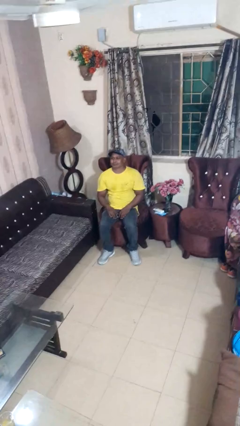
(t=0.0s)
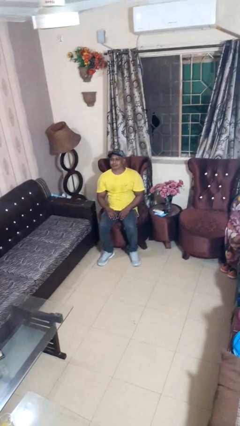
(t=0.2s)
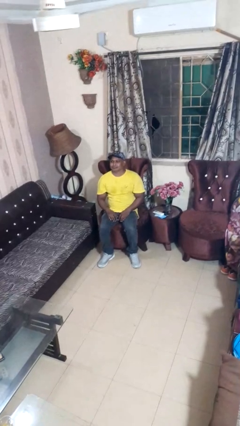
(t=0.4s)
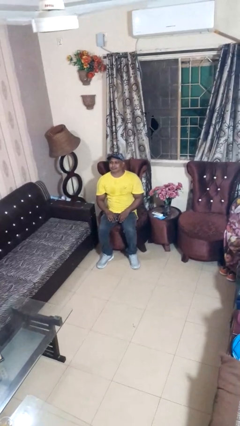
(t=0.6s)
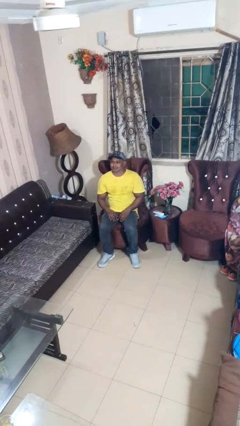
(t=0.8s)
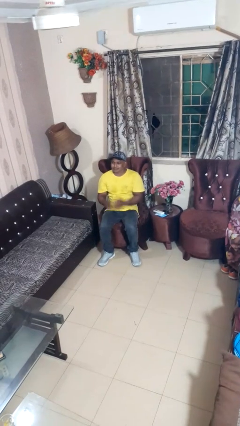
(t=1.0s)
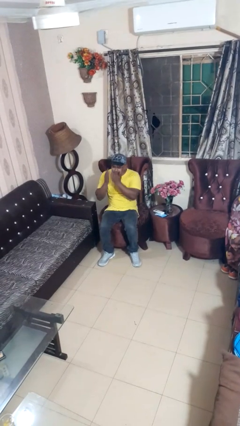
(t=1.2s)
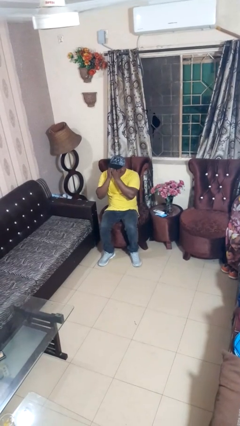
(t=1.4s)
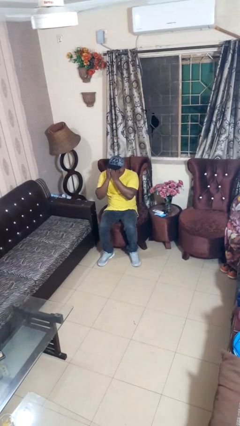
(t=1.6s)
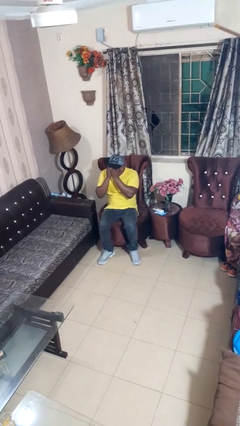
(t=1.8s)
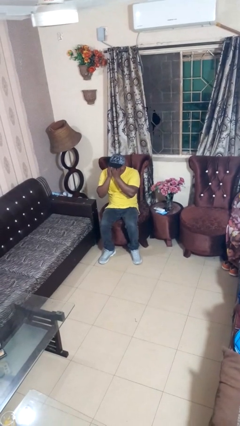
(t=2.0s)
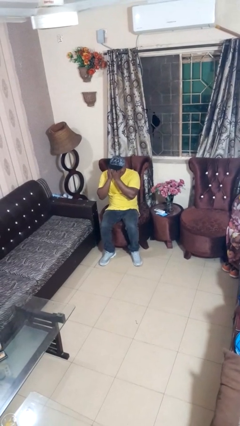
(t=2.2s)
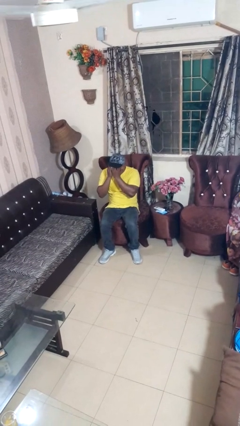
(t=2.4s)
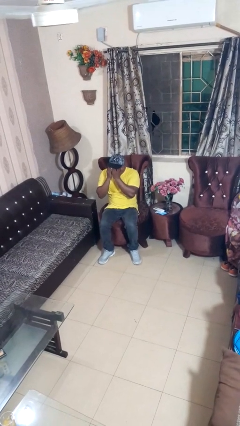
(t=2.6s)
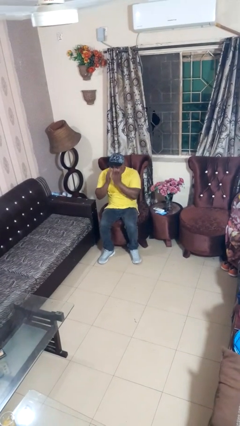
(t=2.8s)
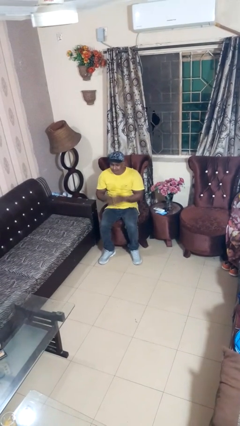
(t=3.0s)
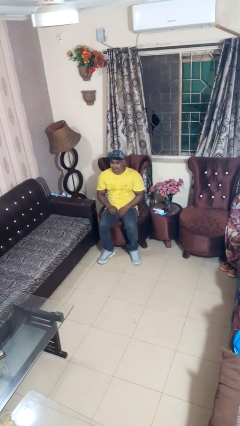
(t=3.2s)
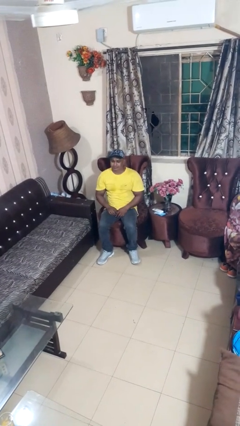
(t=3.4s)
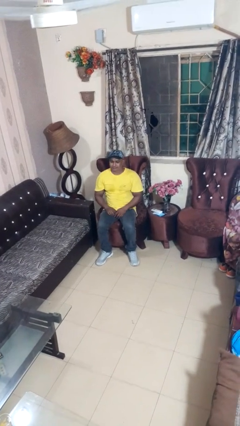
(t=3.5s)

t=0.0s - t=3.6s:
person covers face with hands

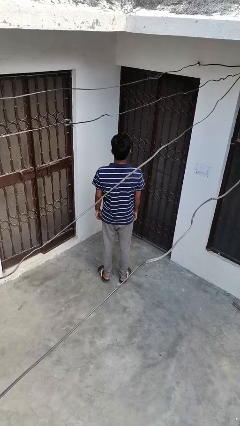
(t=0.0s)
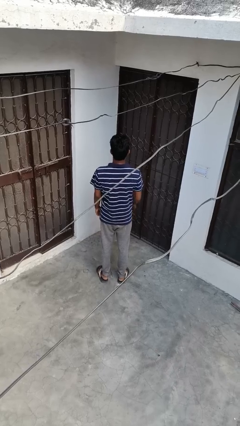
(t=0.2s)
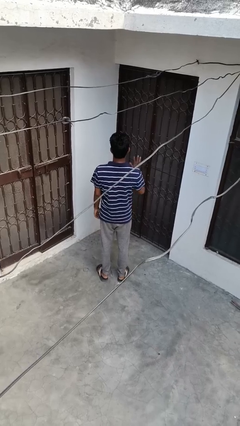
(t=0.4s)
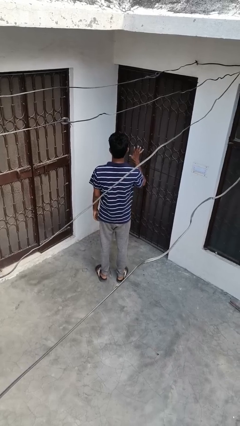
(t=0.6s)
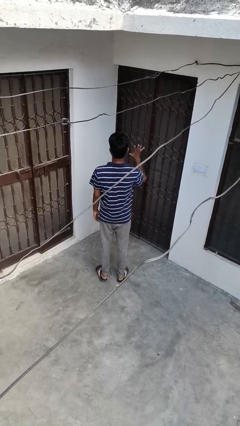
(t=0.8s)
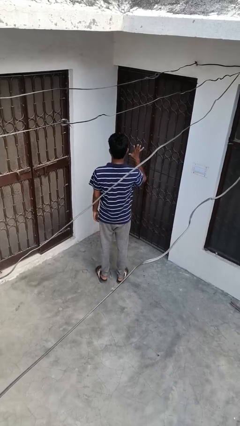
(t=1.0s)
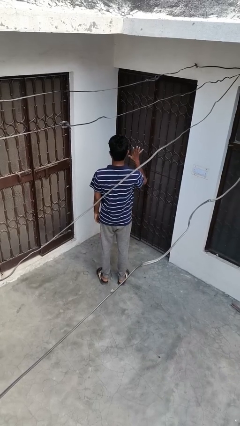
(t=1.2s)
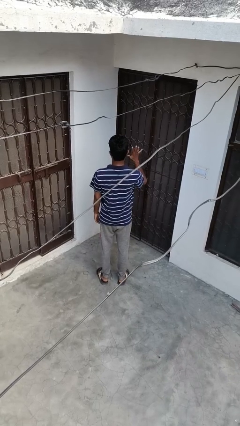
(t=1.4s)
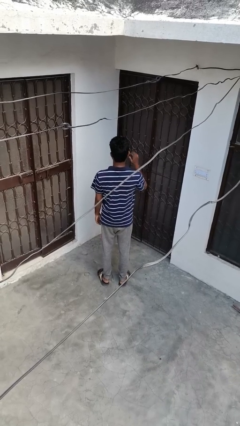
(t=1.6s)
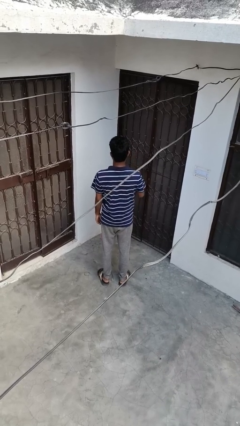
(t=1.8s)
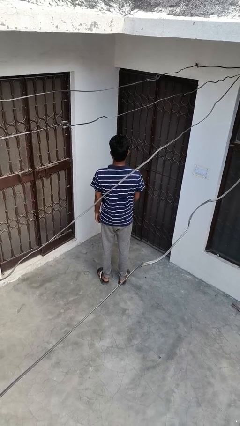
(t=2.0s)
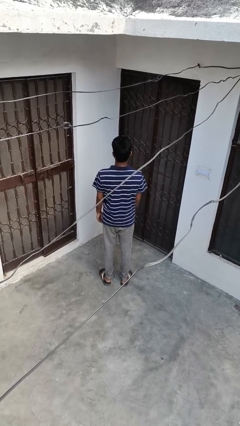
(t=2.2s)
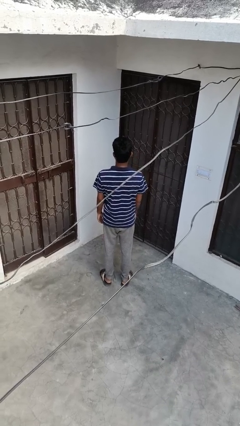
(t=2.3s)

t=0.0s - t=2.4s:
person gestures number five

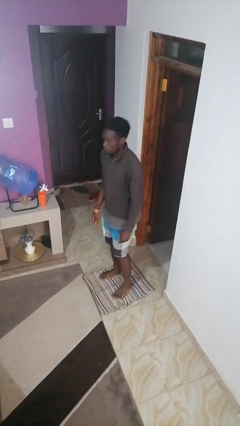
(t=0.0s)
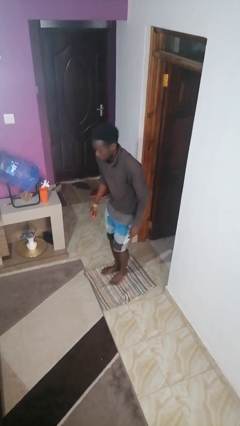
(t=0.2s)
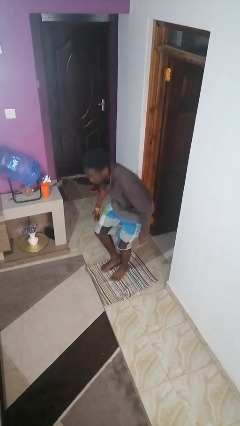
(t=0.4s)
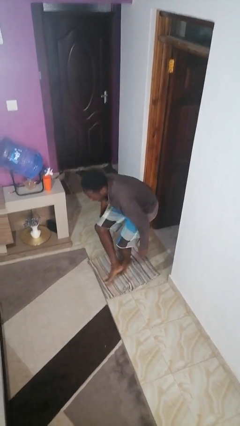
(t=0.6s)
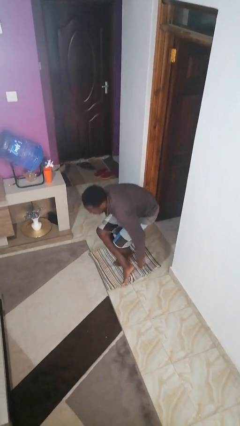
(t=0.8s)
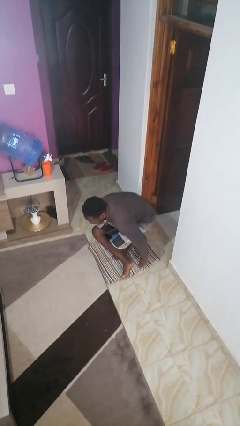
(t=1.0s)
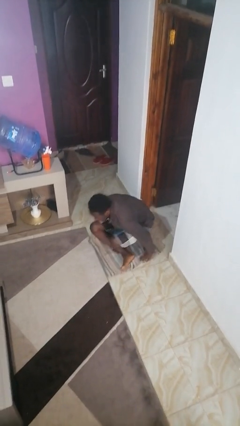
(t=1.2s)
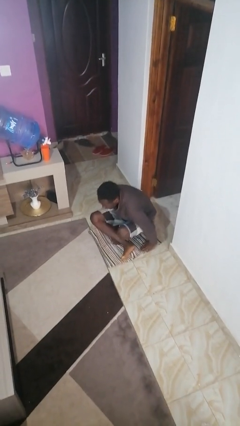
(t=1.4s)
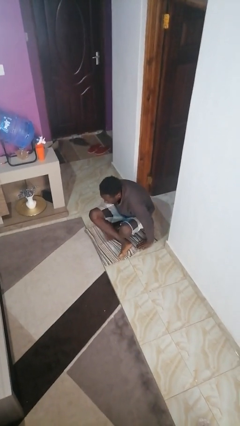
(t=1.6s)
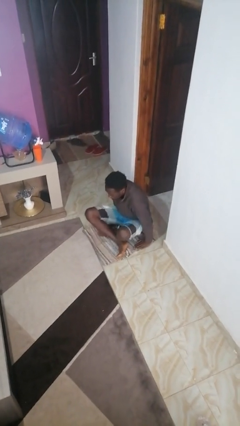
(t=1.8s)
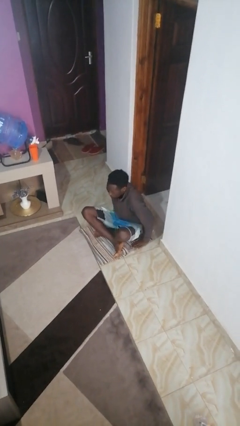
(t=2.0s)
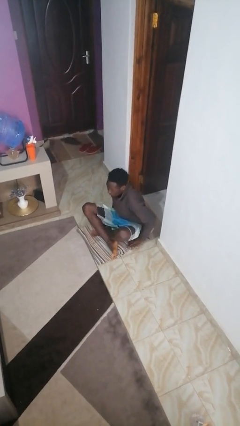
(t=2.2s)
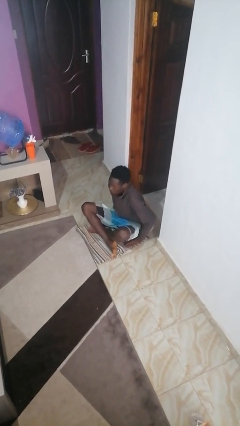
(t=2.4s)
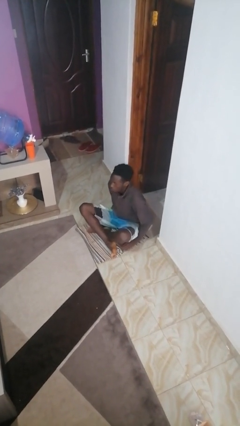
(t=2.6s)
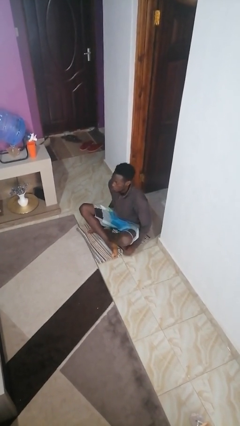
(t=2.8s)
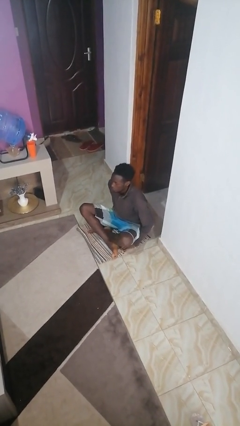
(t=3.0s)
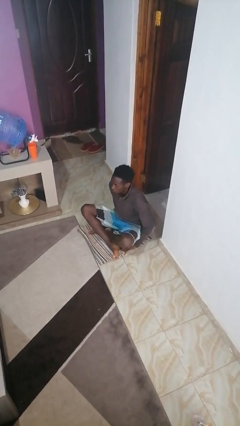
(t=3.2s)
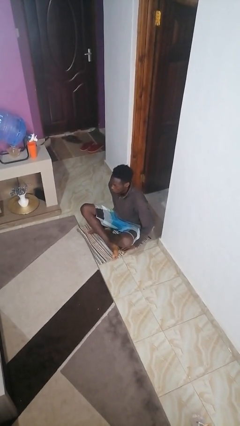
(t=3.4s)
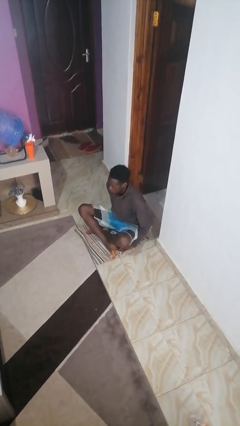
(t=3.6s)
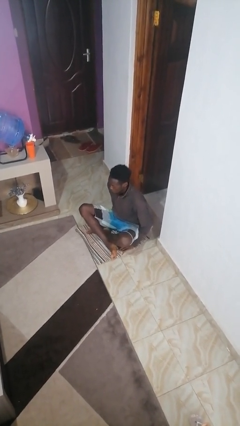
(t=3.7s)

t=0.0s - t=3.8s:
person sits crisscross

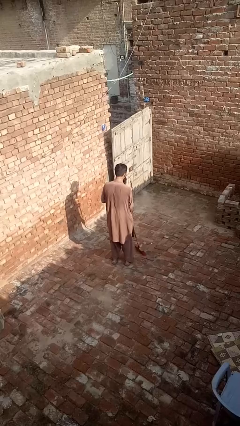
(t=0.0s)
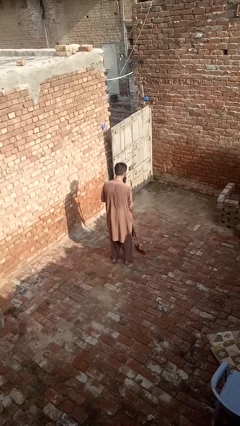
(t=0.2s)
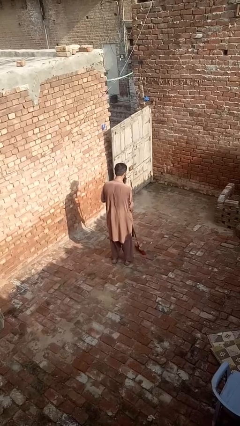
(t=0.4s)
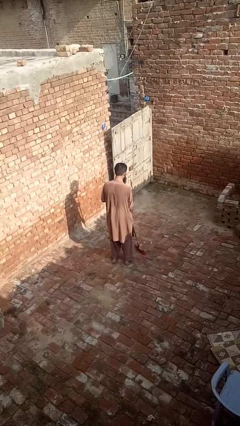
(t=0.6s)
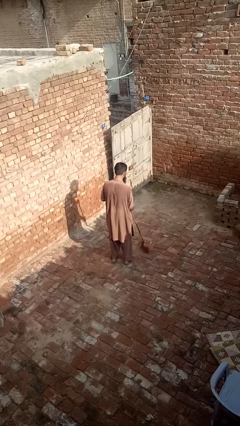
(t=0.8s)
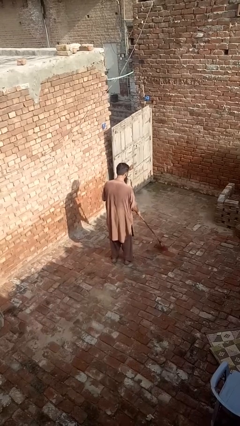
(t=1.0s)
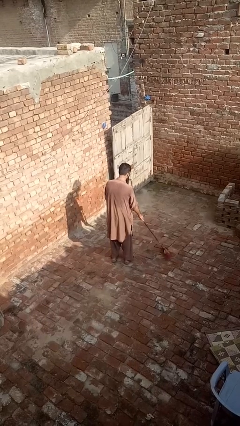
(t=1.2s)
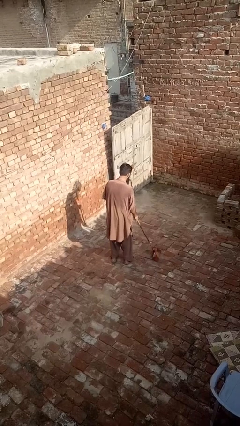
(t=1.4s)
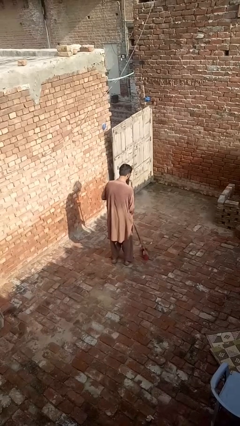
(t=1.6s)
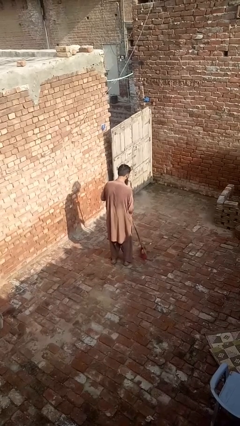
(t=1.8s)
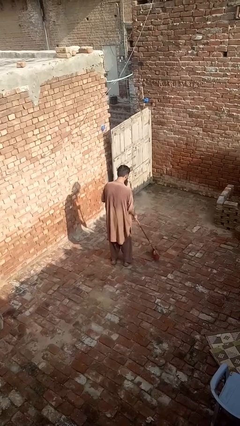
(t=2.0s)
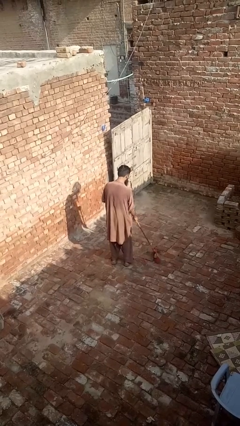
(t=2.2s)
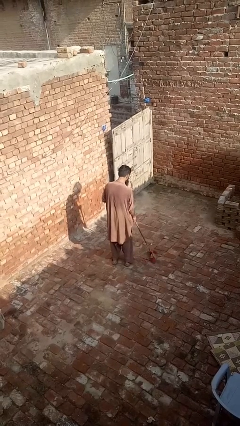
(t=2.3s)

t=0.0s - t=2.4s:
person sweeps floor

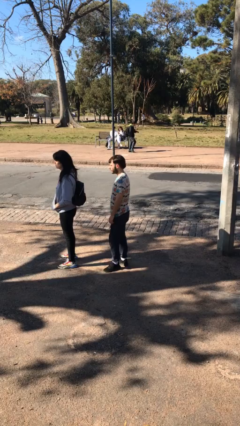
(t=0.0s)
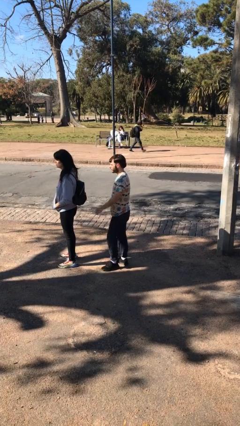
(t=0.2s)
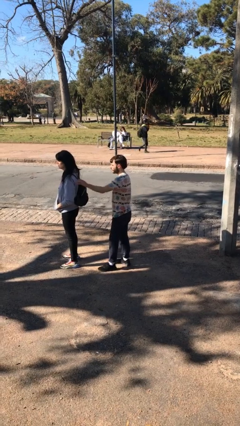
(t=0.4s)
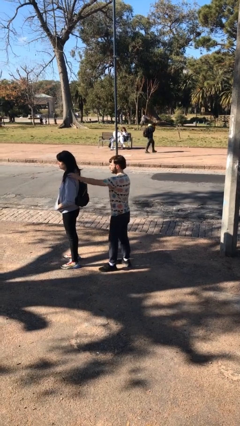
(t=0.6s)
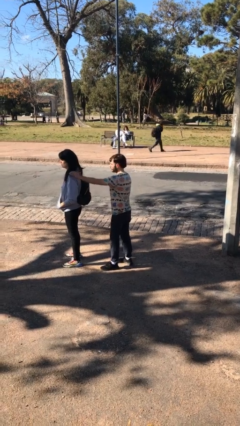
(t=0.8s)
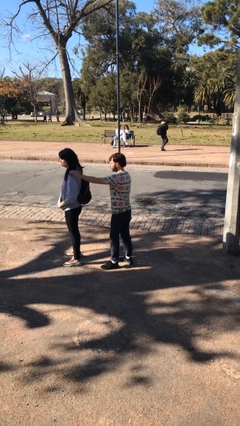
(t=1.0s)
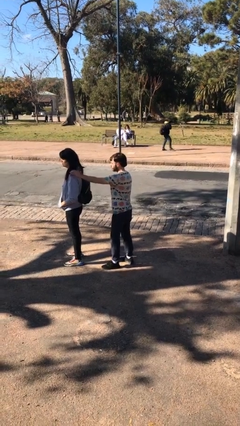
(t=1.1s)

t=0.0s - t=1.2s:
person grabs person by shoulder

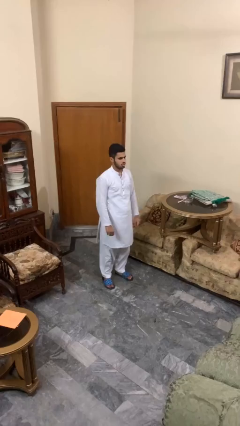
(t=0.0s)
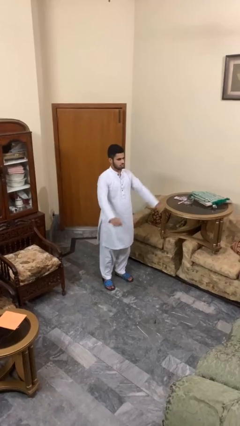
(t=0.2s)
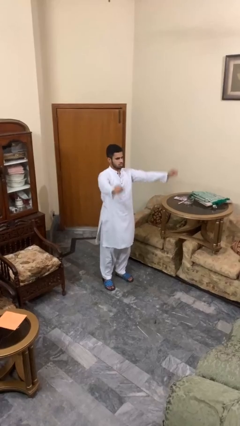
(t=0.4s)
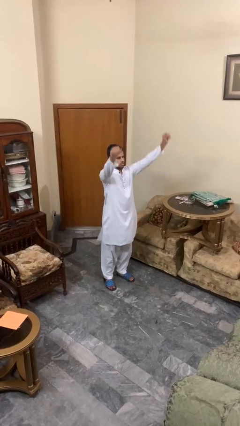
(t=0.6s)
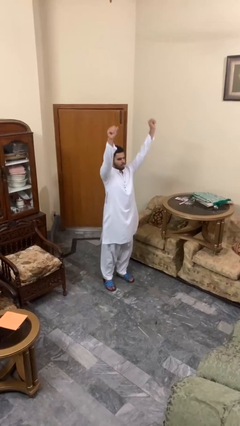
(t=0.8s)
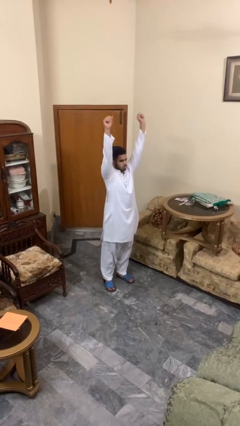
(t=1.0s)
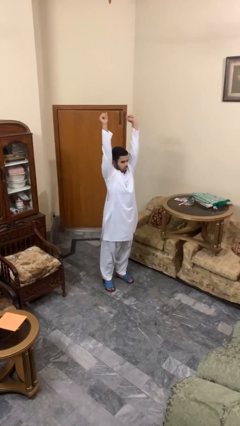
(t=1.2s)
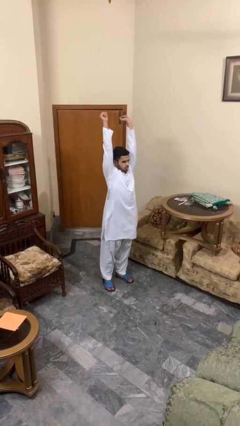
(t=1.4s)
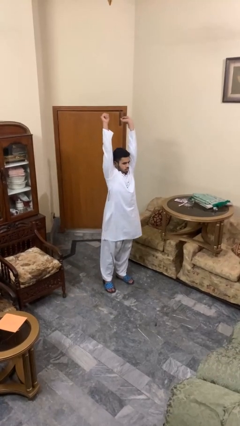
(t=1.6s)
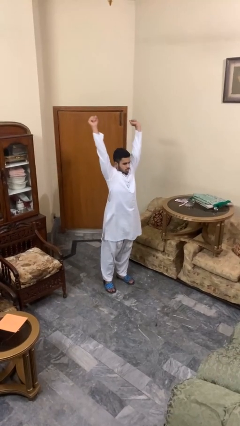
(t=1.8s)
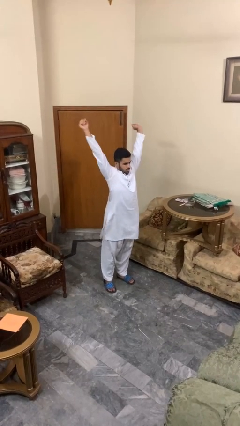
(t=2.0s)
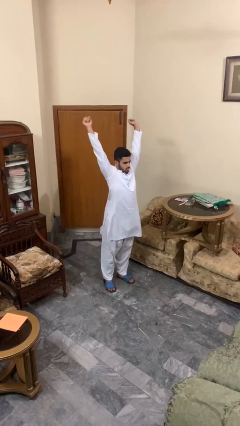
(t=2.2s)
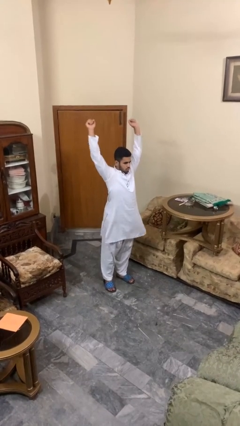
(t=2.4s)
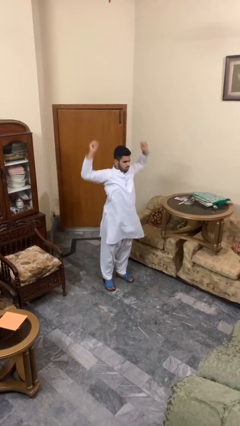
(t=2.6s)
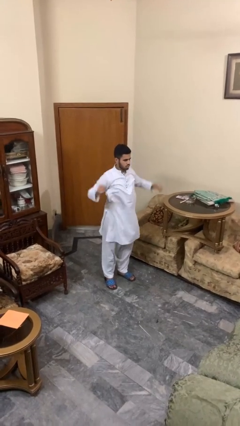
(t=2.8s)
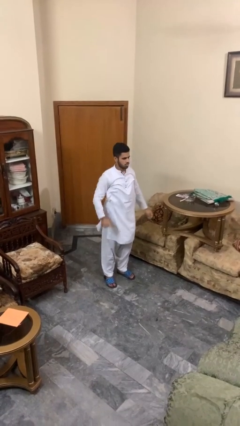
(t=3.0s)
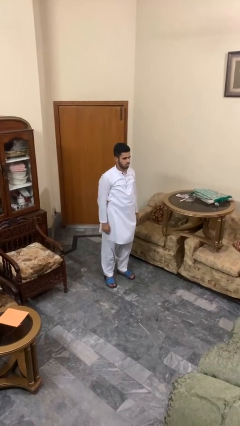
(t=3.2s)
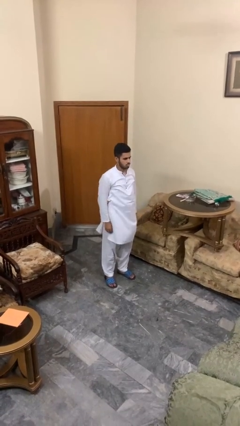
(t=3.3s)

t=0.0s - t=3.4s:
person stretches arms over head

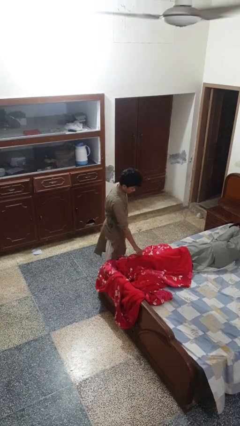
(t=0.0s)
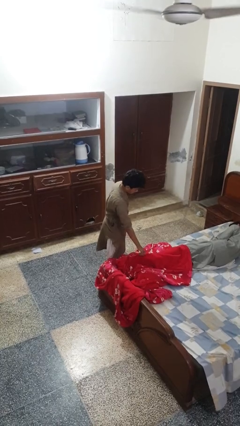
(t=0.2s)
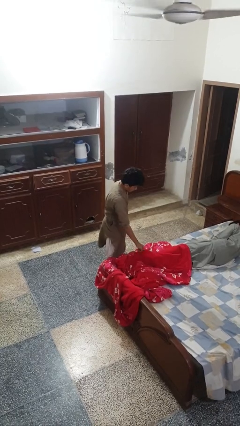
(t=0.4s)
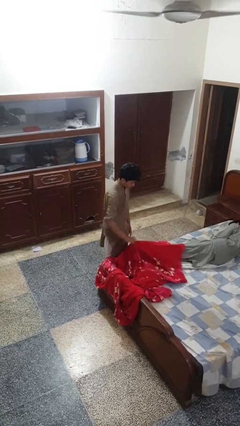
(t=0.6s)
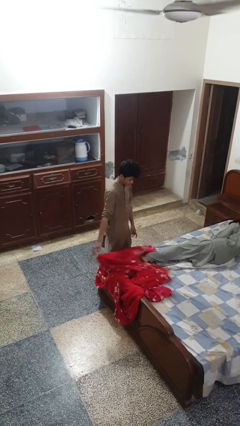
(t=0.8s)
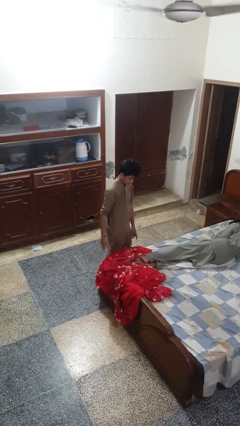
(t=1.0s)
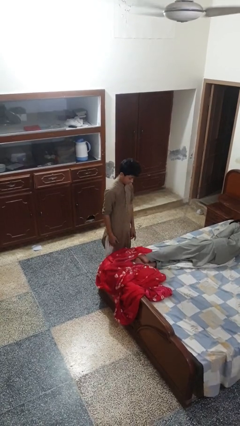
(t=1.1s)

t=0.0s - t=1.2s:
person uncovers friend with blanket
